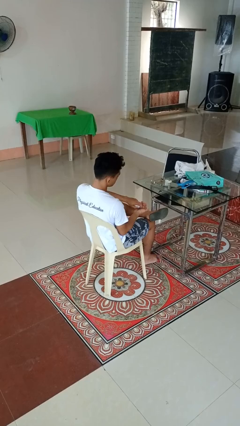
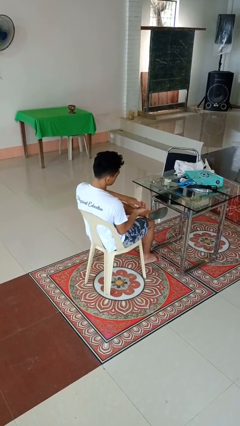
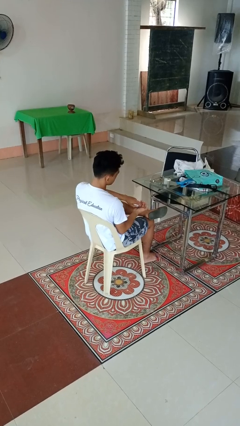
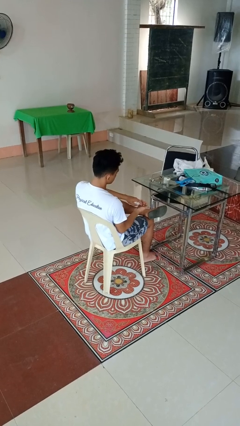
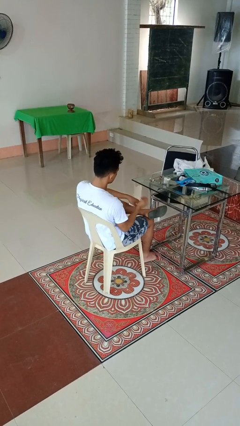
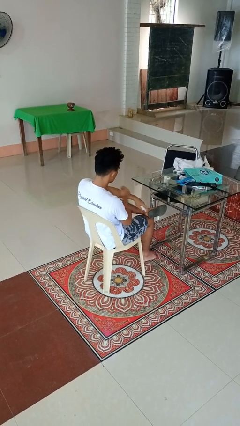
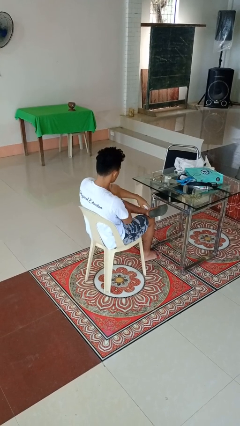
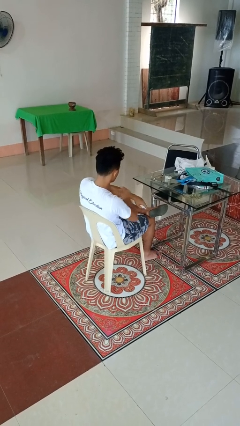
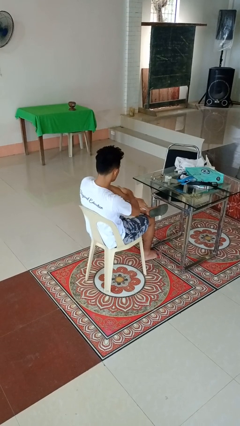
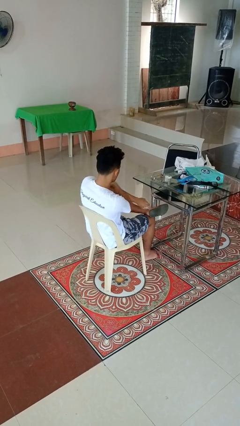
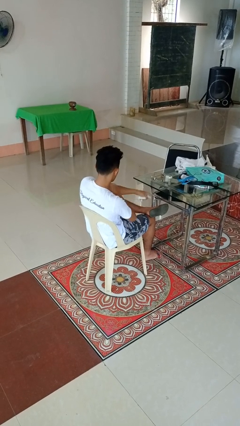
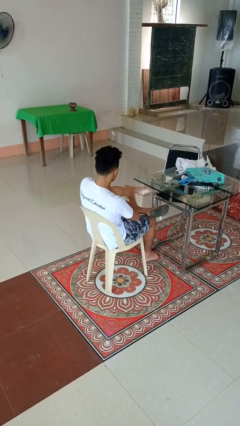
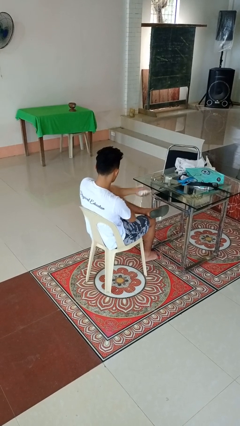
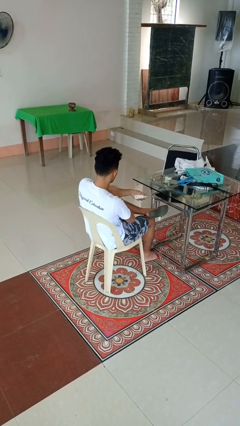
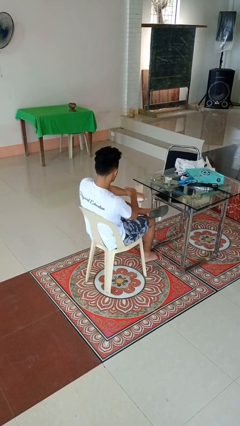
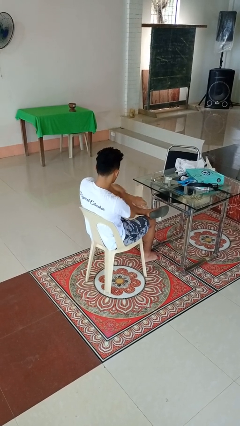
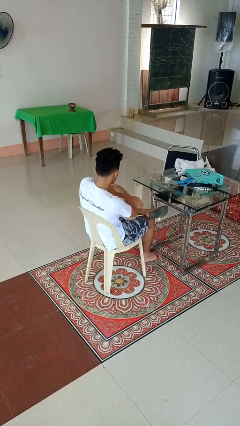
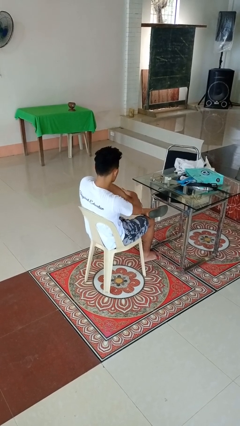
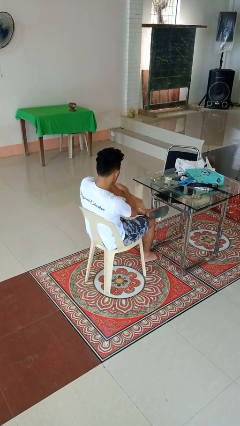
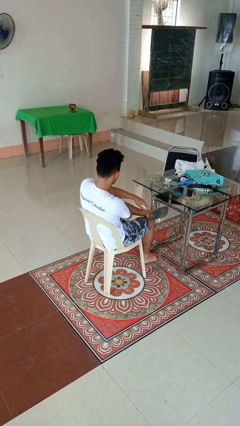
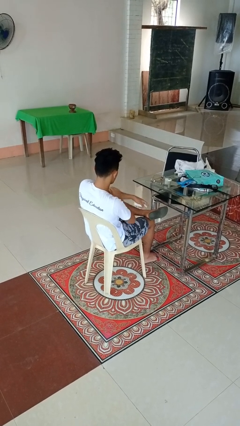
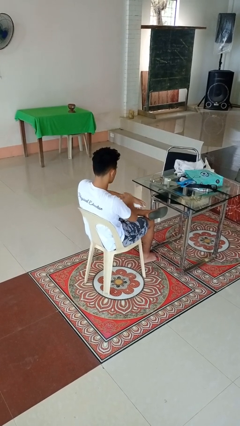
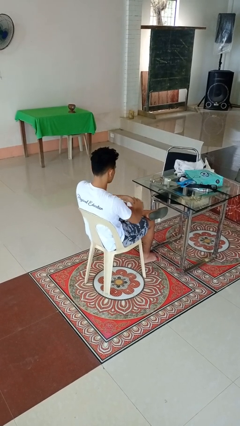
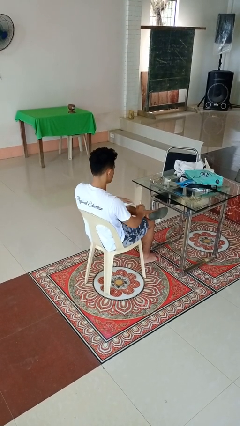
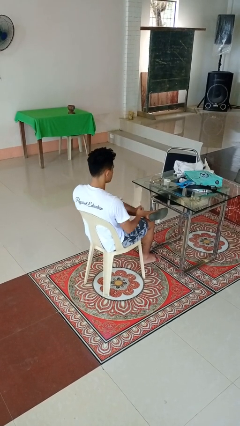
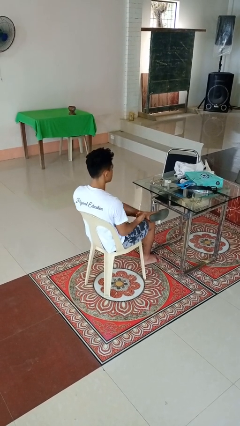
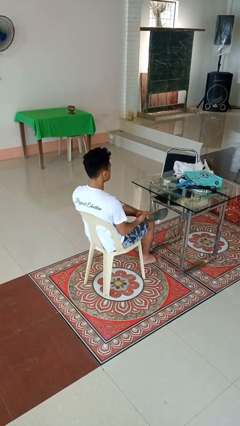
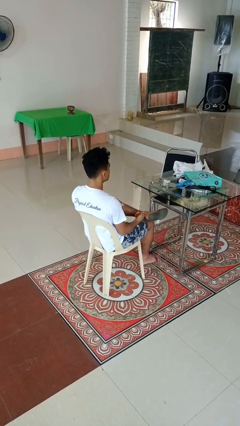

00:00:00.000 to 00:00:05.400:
person applies sunscreen

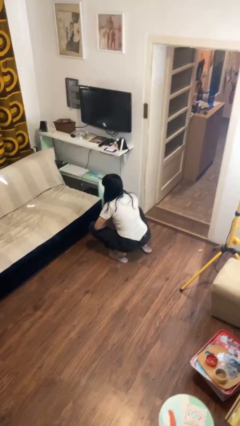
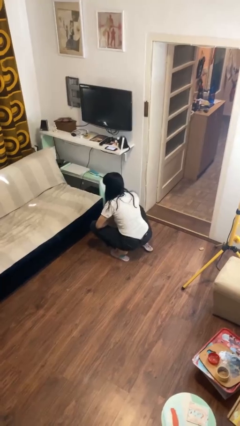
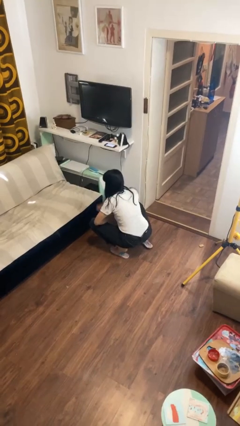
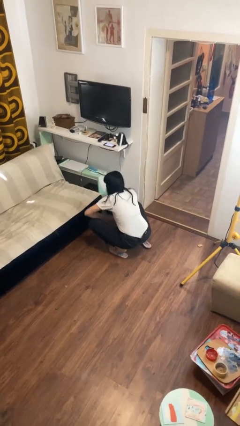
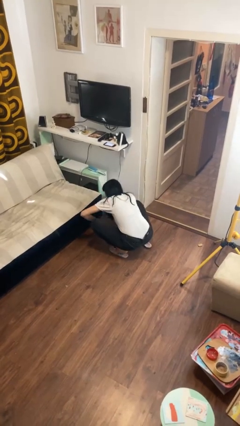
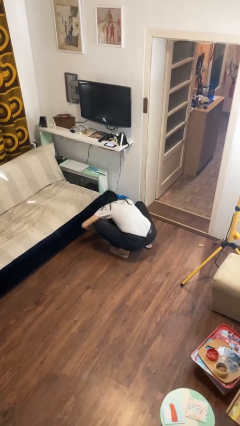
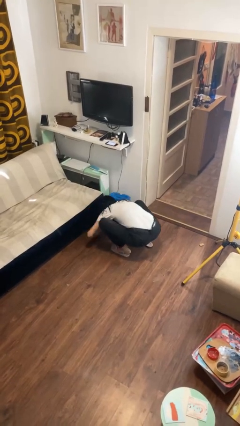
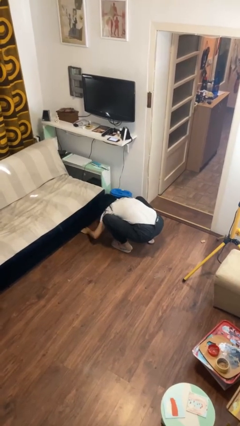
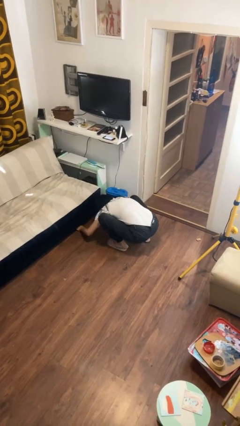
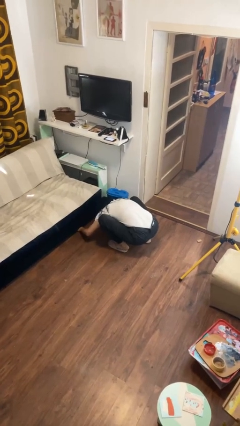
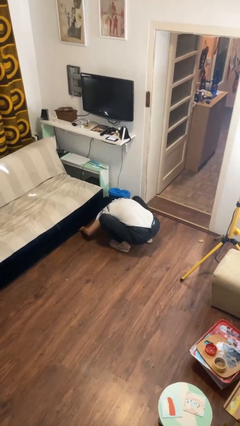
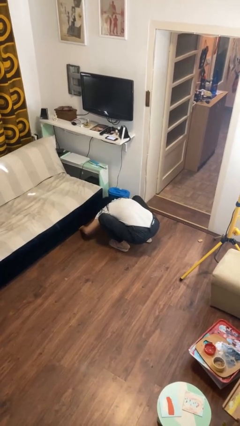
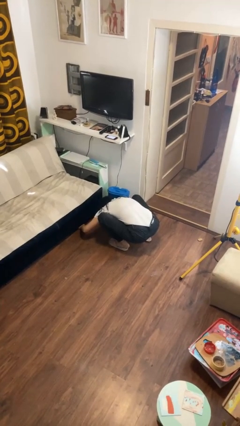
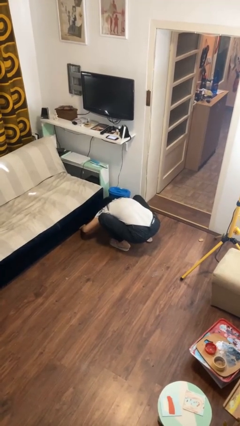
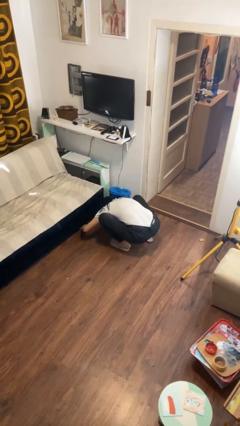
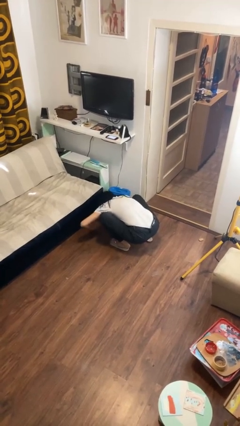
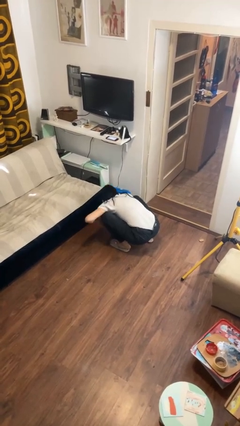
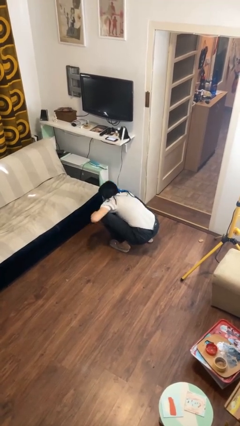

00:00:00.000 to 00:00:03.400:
person searches under couch

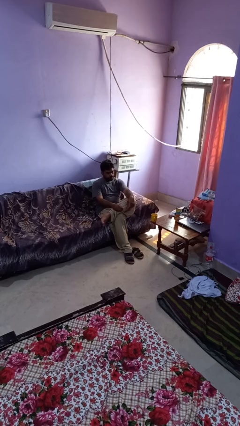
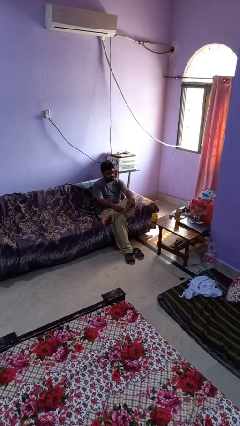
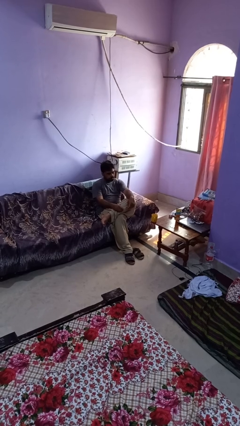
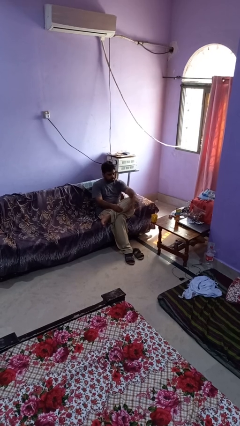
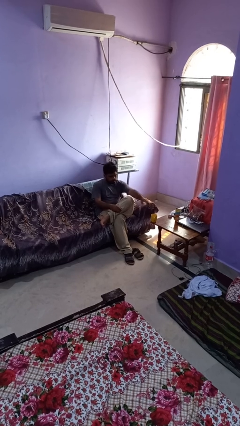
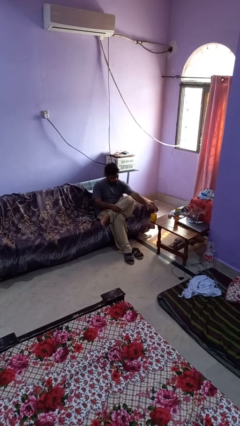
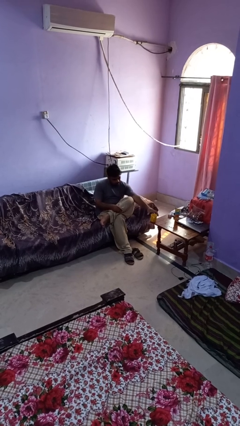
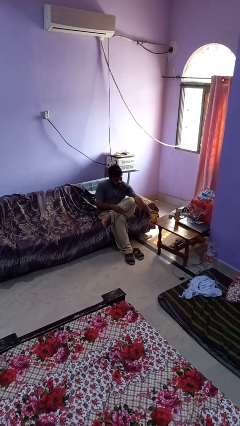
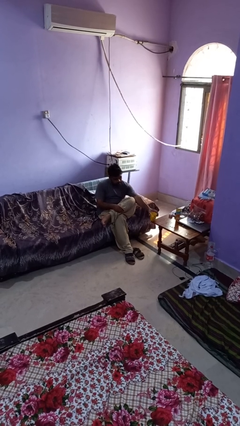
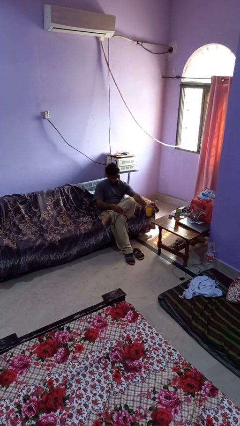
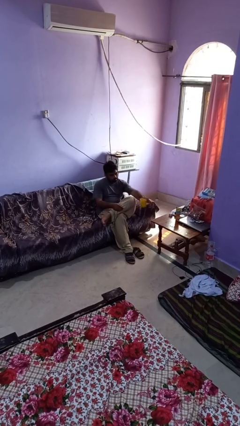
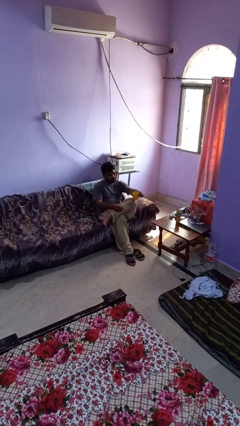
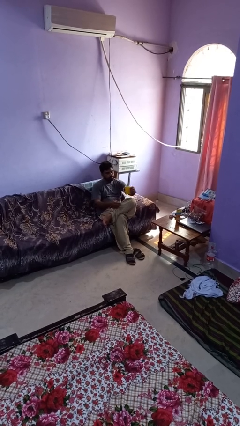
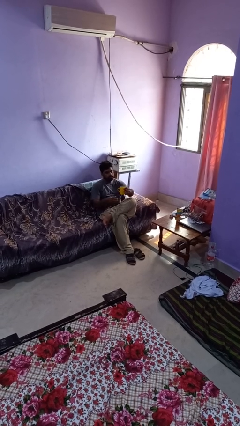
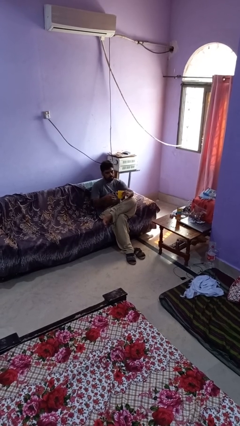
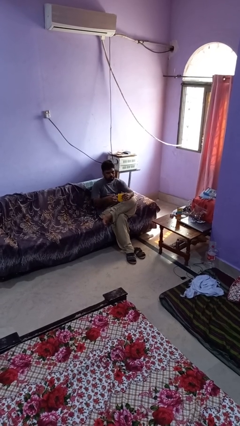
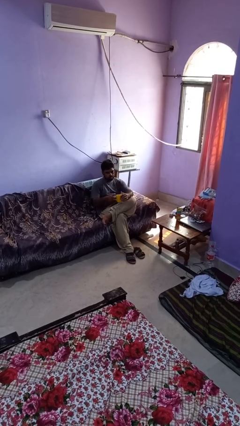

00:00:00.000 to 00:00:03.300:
person picks up object from table

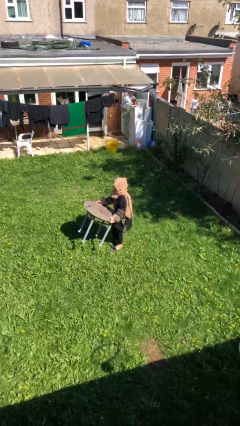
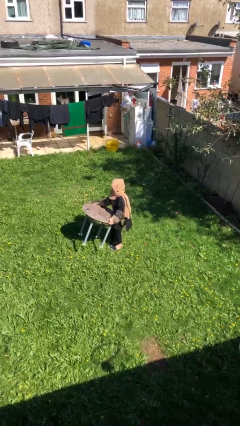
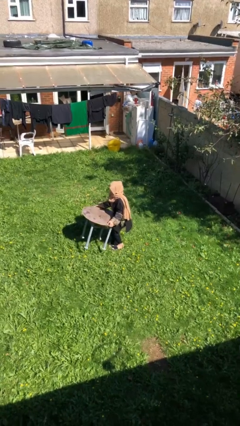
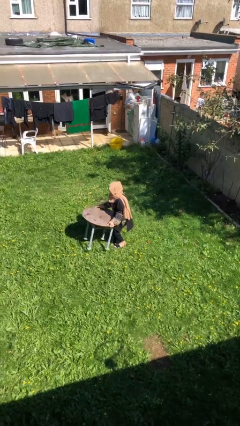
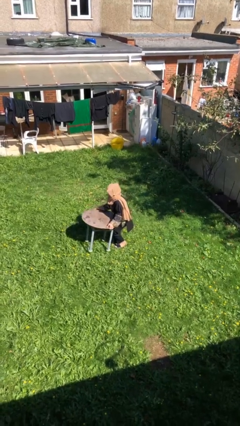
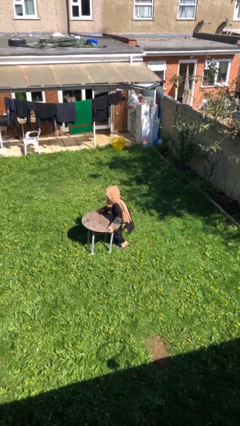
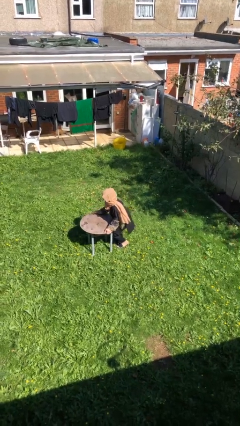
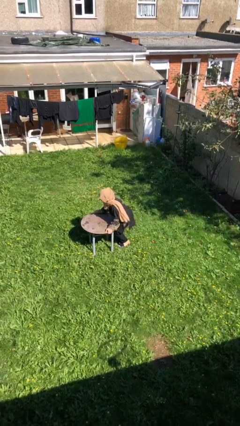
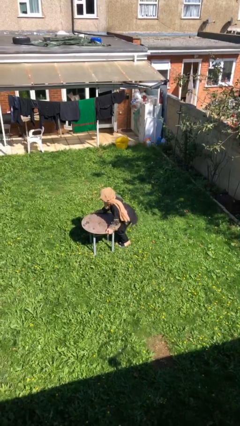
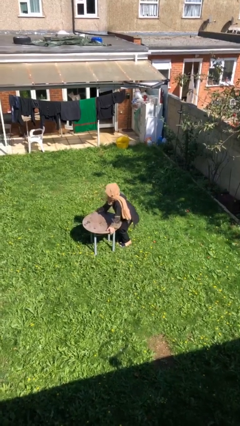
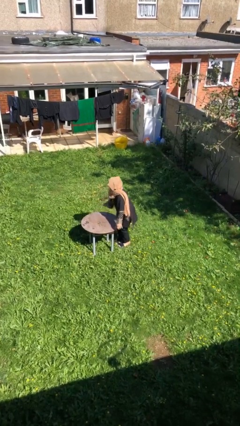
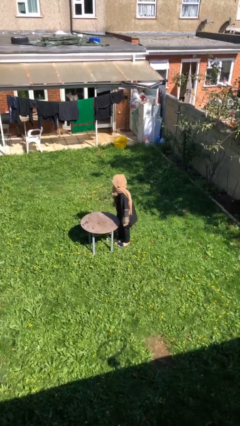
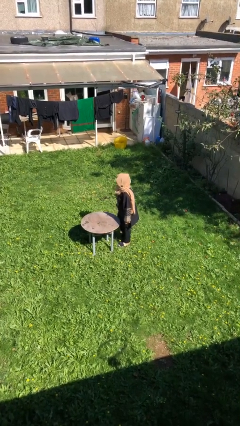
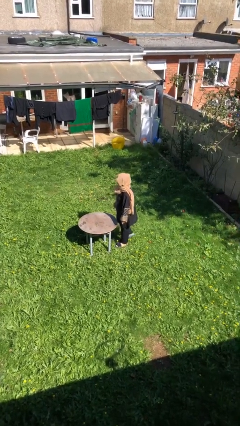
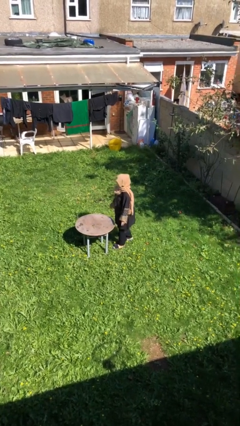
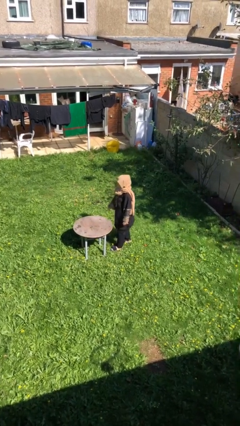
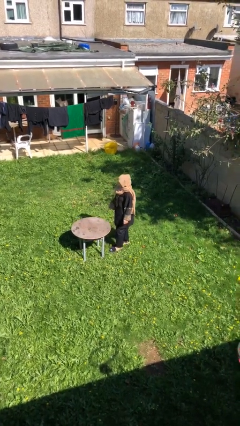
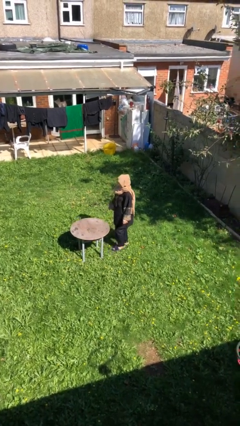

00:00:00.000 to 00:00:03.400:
person puts down object on floor

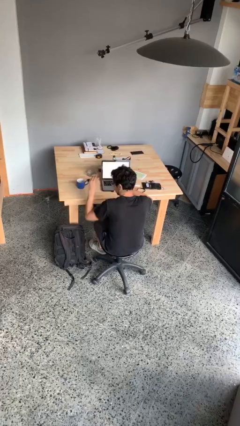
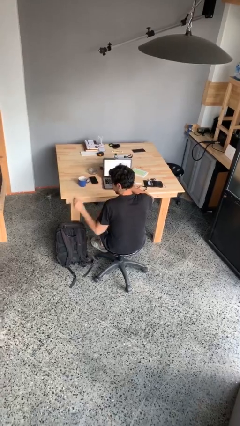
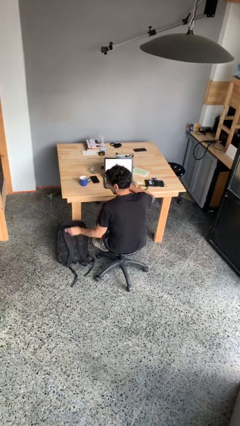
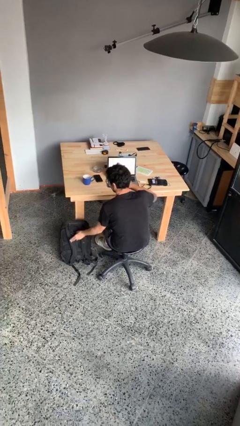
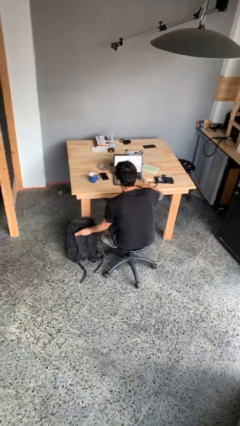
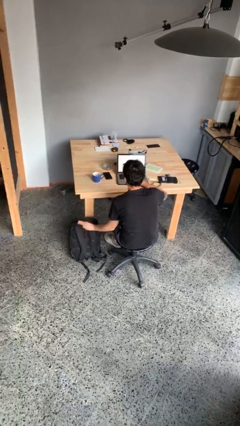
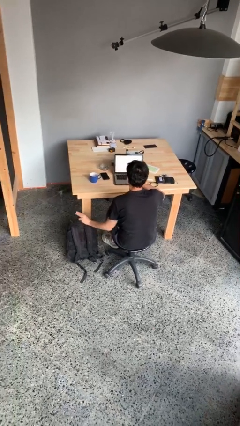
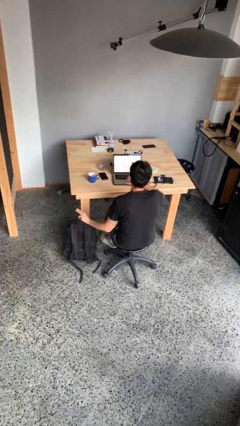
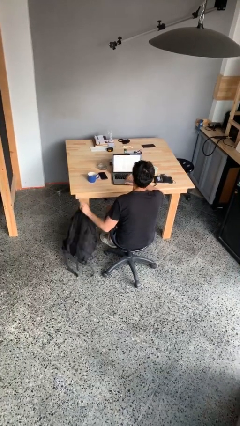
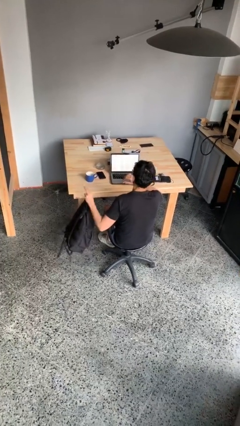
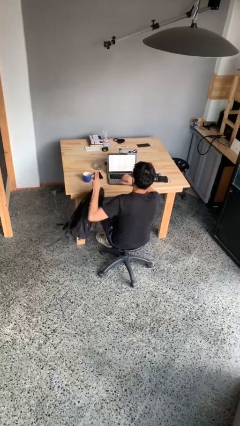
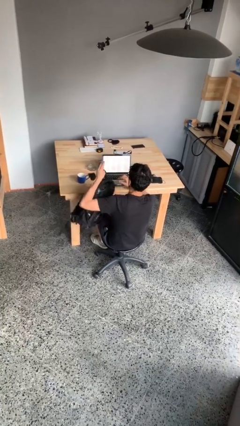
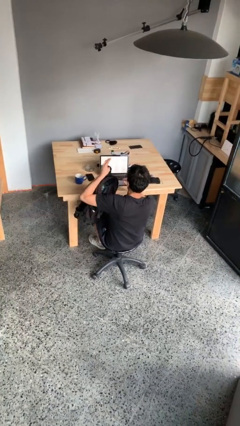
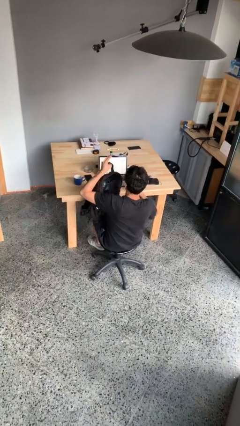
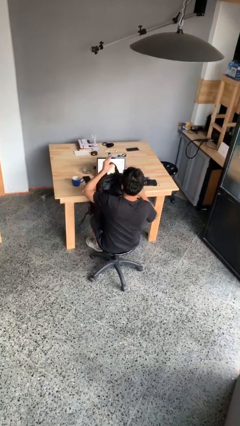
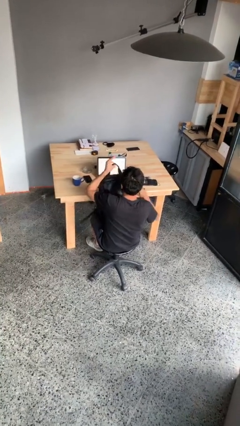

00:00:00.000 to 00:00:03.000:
person picks up object from floor
